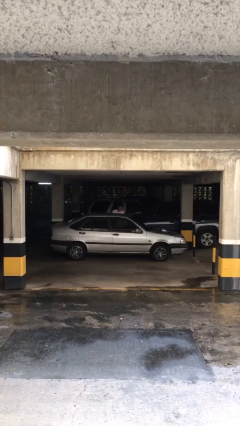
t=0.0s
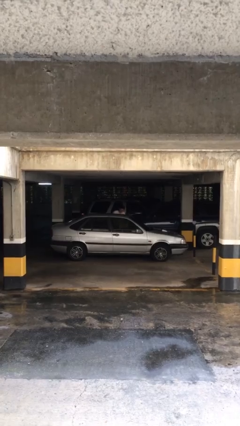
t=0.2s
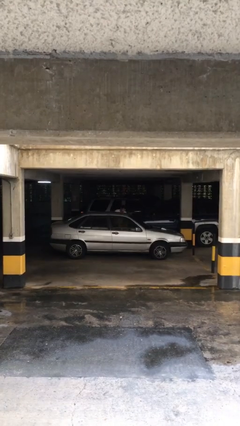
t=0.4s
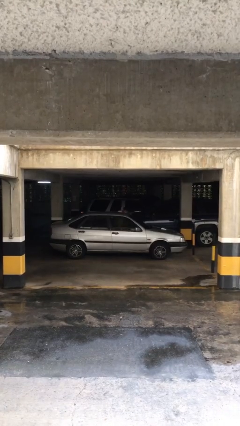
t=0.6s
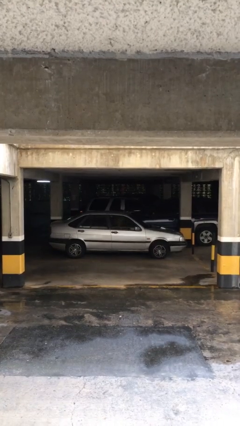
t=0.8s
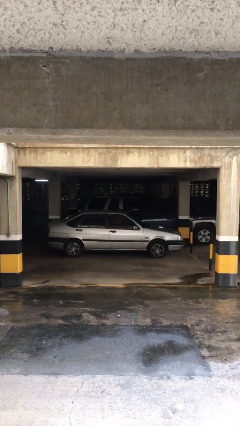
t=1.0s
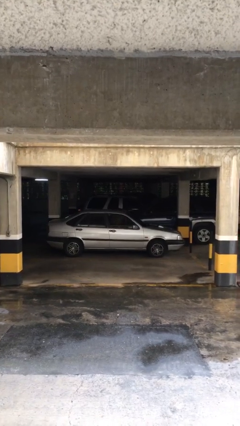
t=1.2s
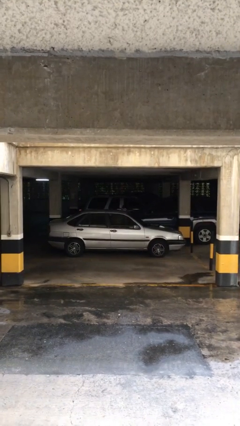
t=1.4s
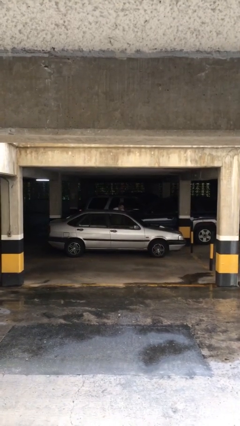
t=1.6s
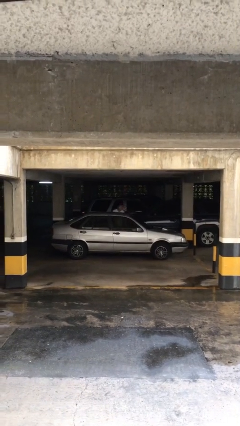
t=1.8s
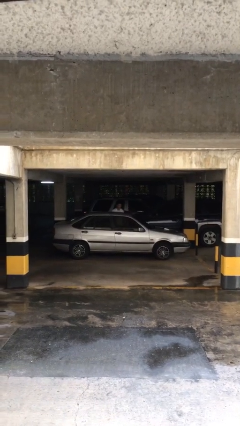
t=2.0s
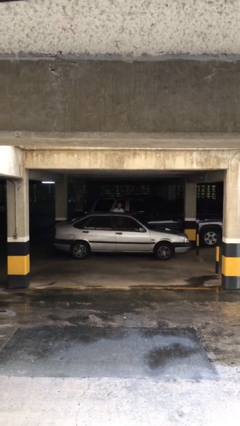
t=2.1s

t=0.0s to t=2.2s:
person loads car

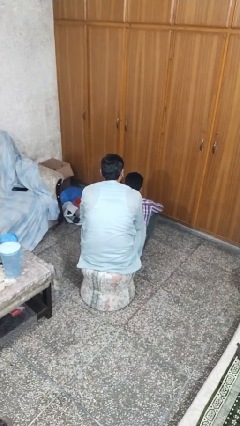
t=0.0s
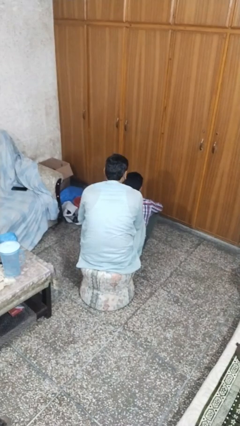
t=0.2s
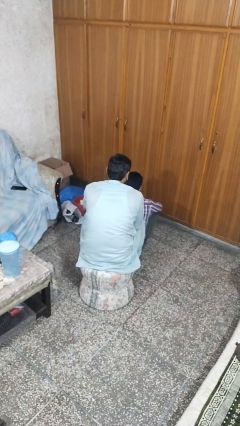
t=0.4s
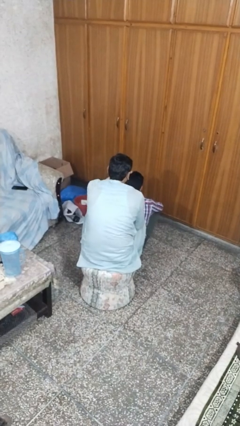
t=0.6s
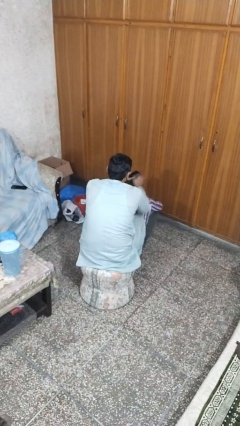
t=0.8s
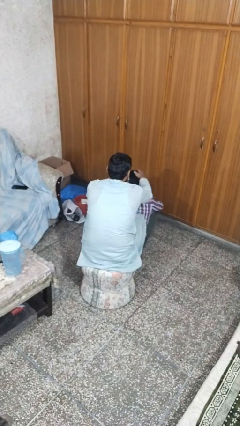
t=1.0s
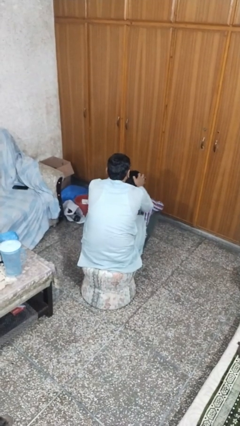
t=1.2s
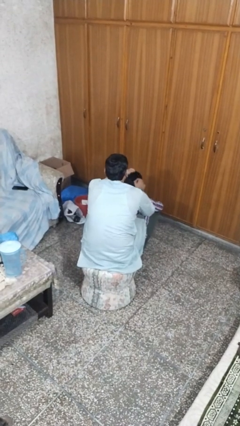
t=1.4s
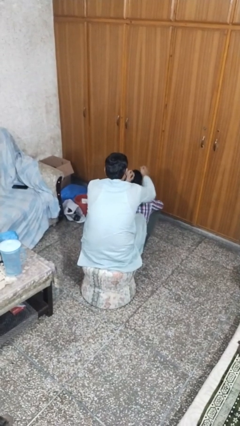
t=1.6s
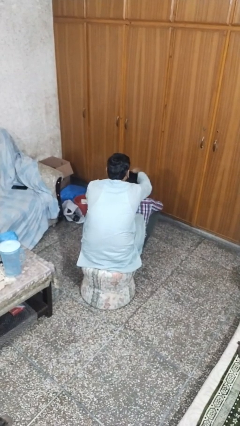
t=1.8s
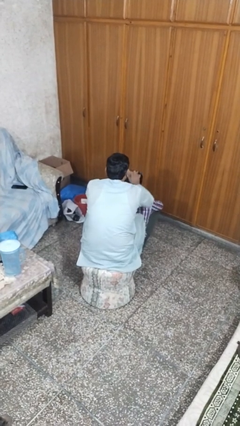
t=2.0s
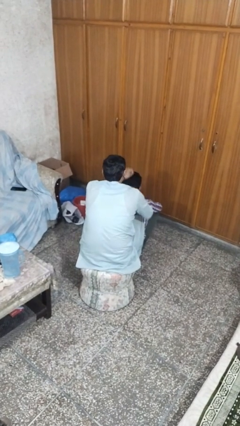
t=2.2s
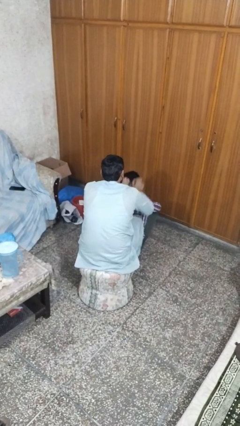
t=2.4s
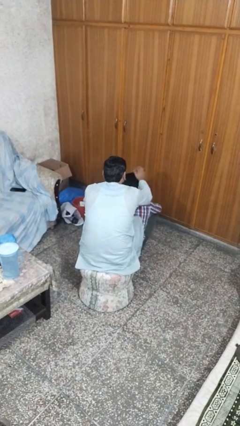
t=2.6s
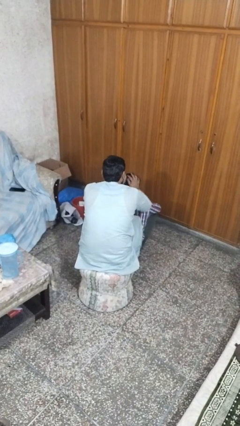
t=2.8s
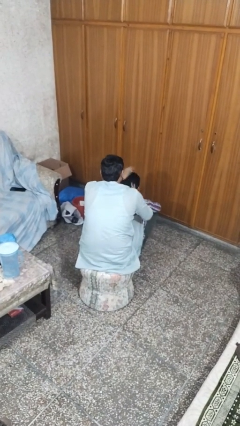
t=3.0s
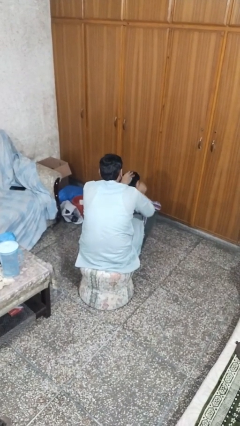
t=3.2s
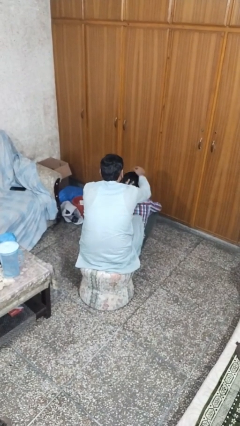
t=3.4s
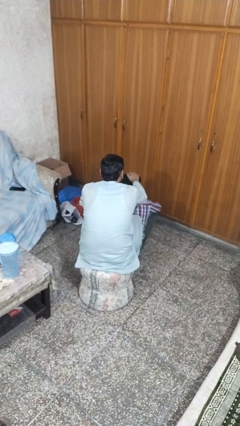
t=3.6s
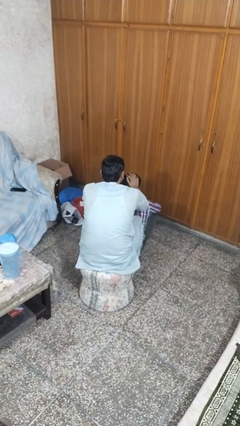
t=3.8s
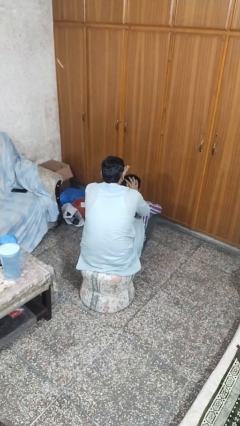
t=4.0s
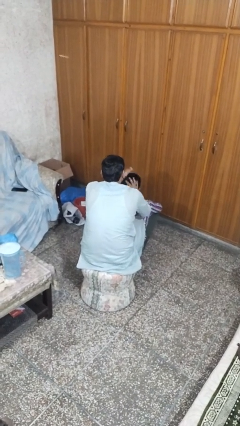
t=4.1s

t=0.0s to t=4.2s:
person braids hair of person

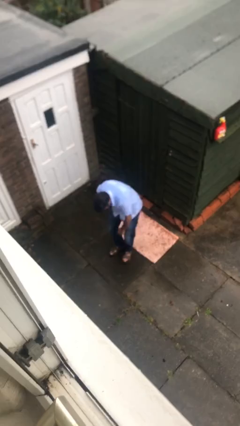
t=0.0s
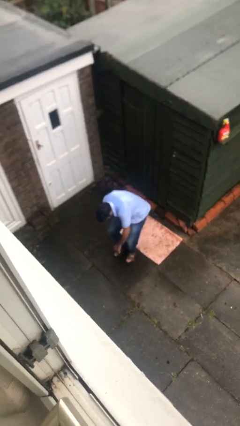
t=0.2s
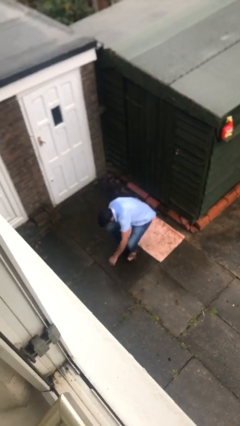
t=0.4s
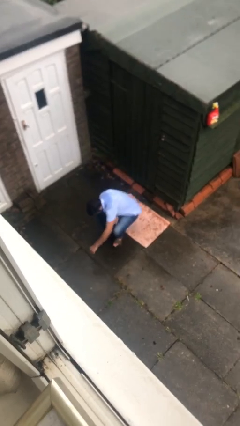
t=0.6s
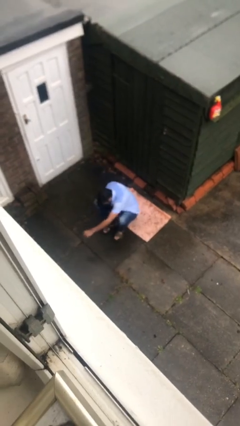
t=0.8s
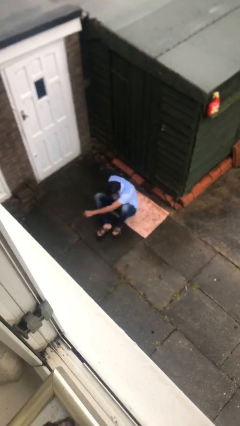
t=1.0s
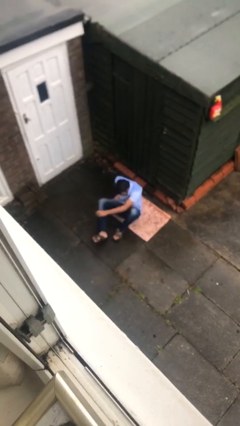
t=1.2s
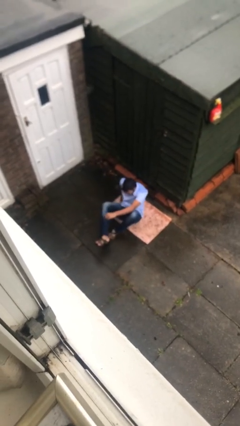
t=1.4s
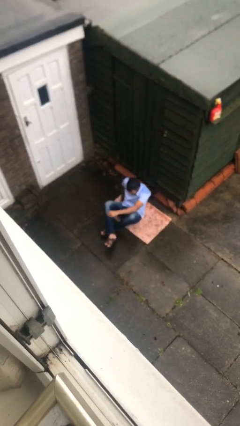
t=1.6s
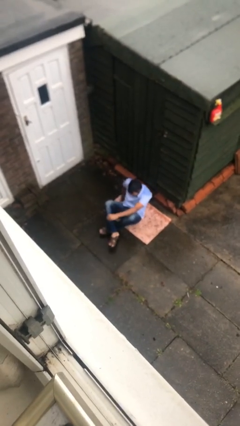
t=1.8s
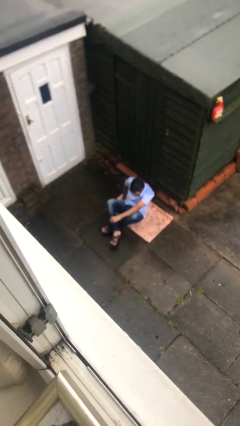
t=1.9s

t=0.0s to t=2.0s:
person sits down

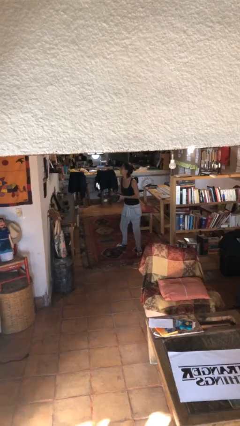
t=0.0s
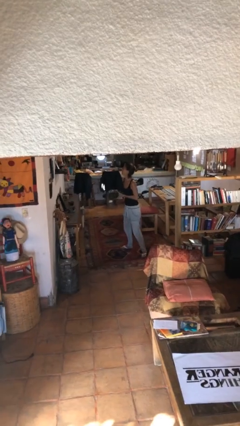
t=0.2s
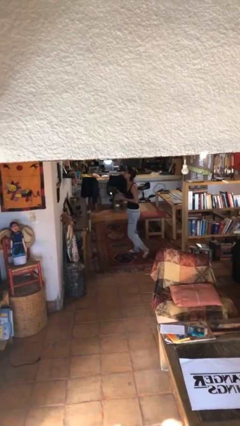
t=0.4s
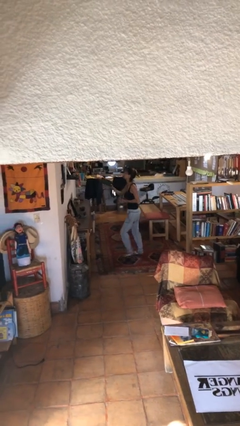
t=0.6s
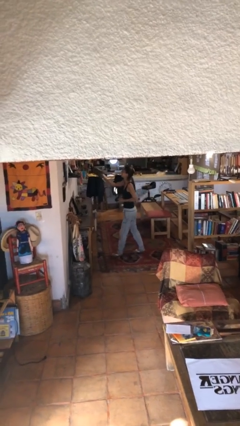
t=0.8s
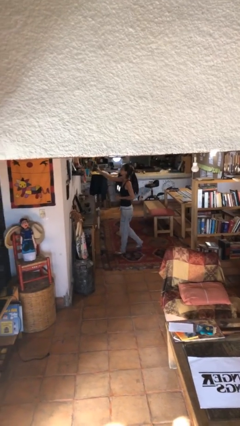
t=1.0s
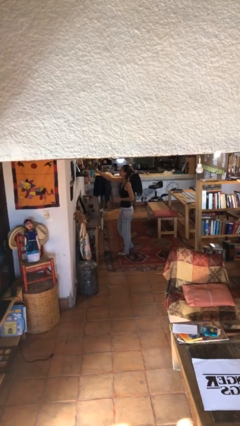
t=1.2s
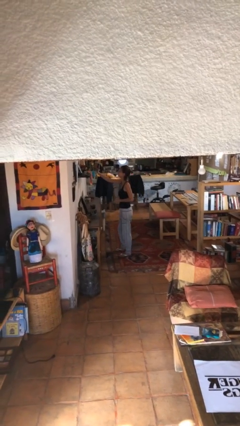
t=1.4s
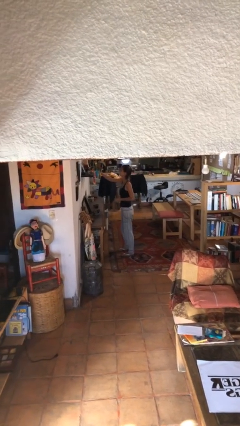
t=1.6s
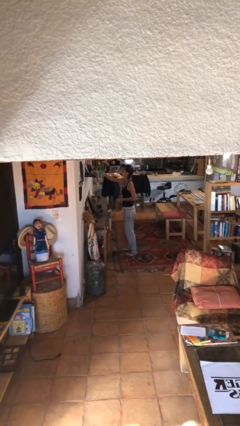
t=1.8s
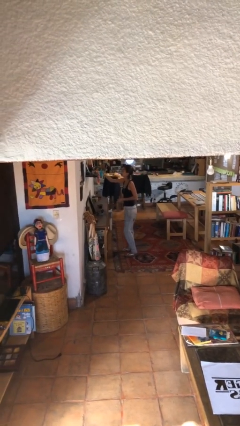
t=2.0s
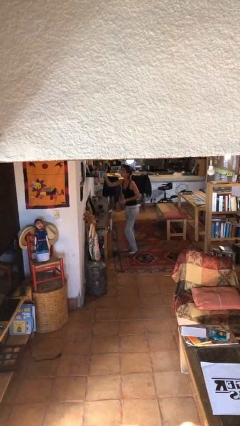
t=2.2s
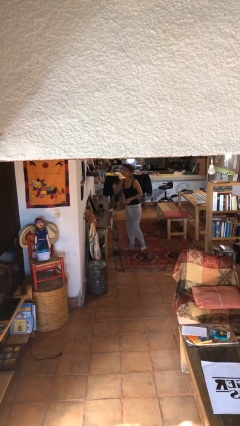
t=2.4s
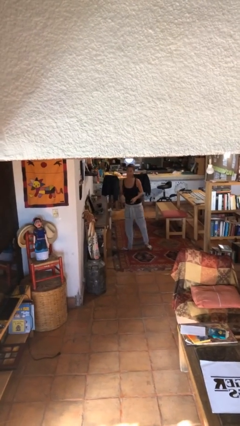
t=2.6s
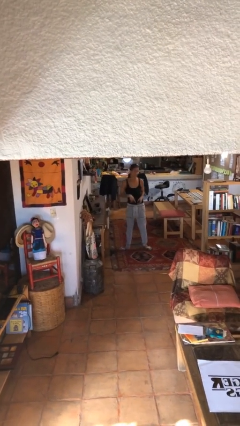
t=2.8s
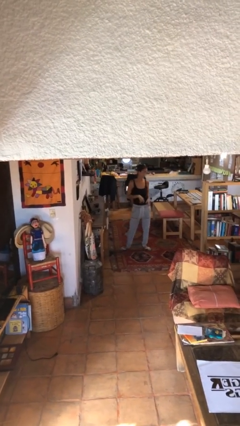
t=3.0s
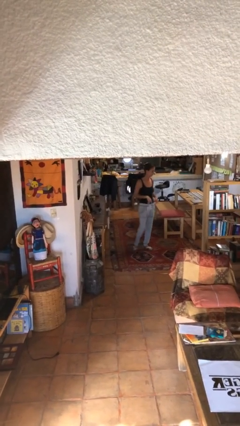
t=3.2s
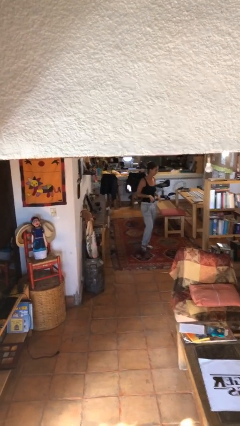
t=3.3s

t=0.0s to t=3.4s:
person puts down object on shelf

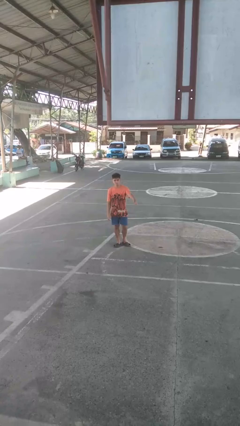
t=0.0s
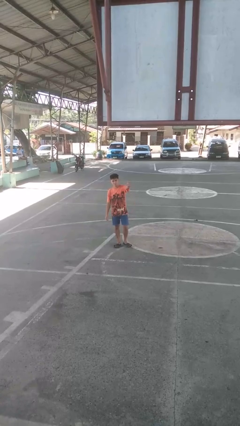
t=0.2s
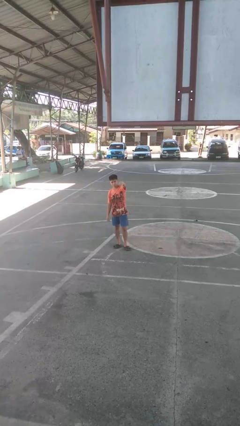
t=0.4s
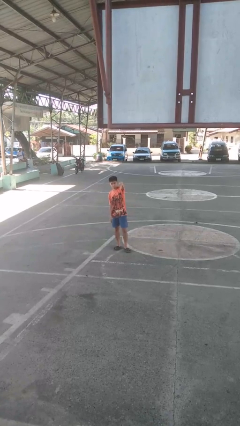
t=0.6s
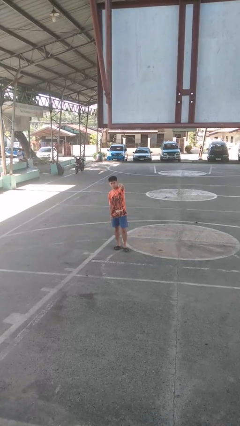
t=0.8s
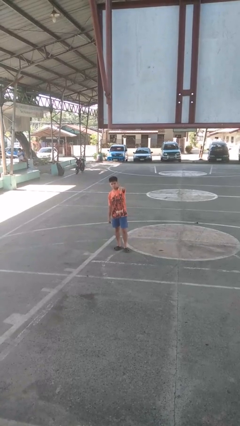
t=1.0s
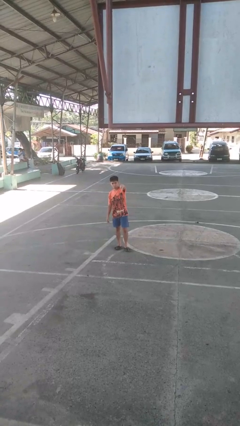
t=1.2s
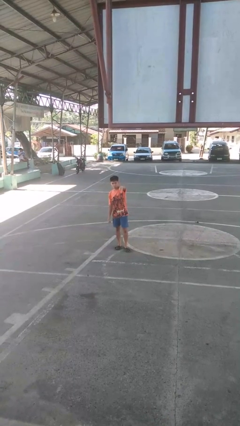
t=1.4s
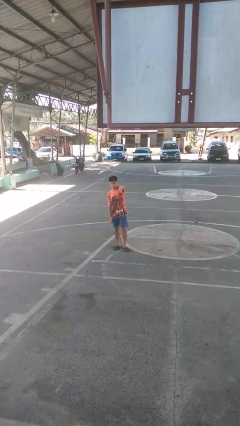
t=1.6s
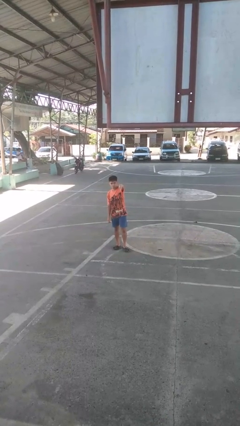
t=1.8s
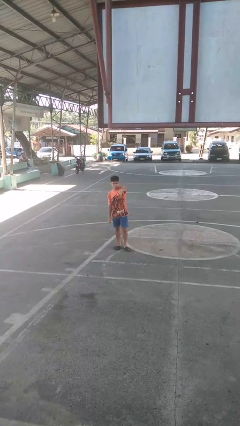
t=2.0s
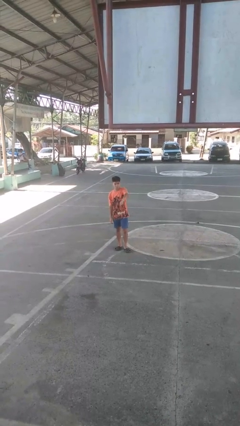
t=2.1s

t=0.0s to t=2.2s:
person gestures thumbs down

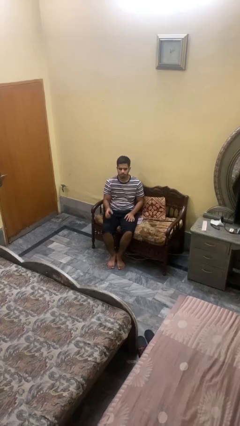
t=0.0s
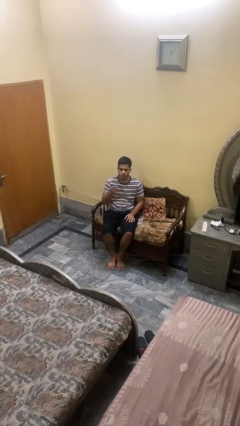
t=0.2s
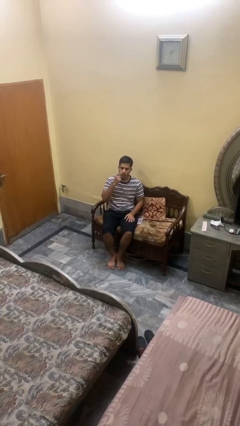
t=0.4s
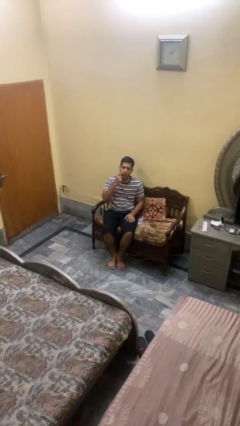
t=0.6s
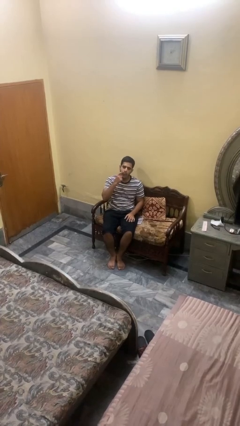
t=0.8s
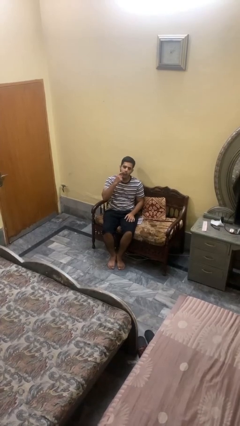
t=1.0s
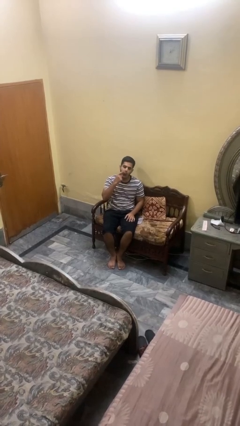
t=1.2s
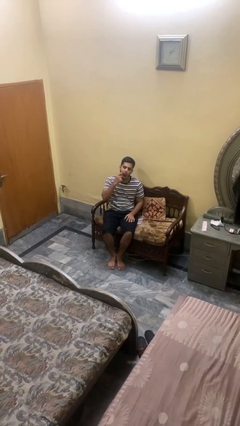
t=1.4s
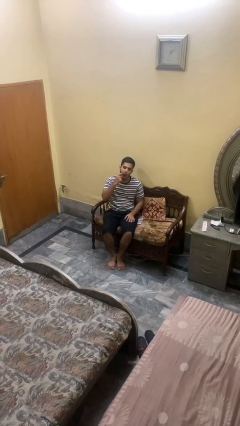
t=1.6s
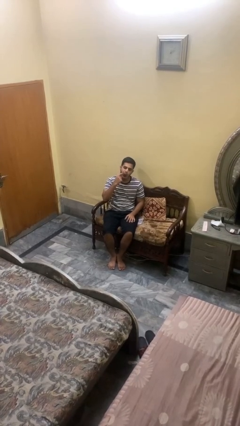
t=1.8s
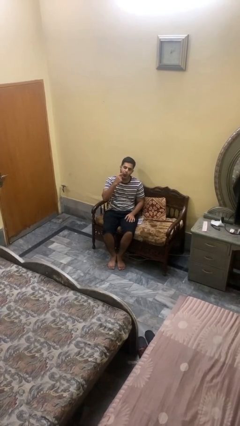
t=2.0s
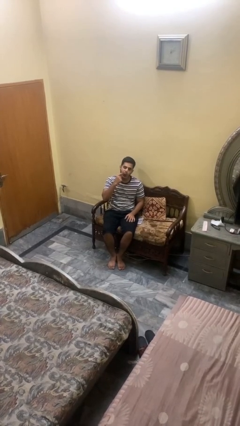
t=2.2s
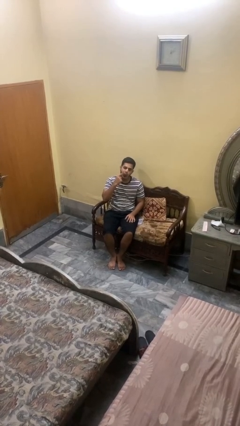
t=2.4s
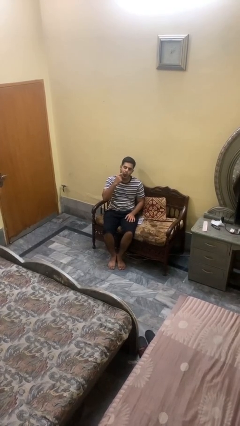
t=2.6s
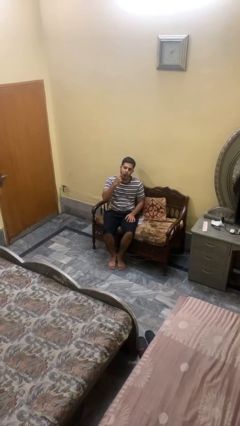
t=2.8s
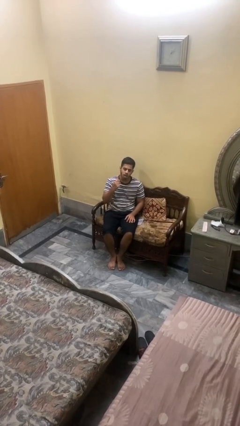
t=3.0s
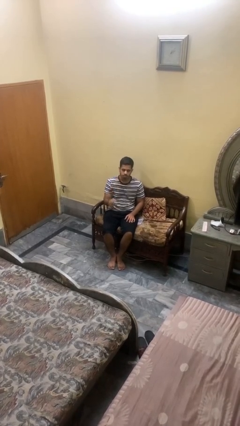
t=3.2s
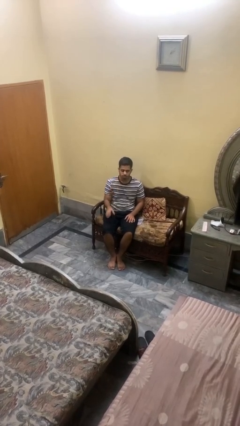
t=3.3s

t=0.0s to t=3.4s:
person scratches face
